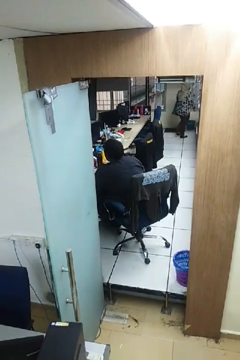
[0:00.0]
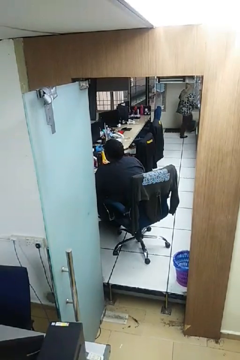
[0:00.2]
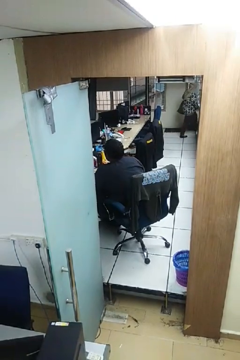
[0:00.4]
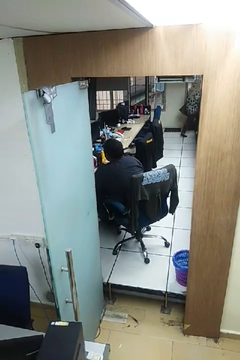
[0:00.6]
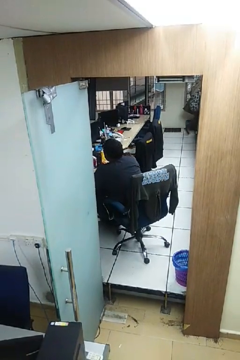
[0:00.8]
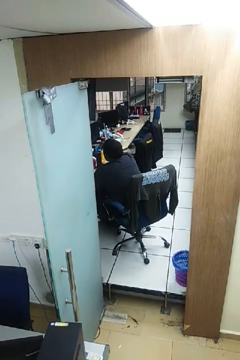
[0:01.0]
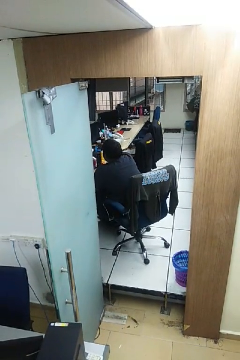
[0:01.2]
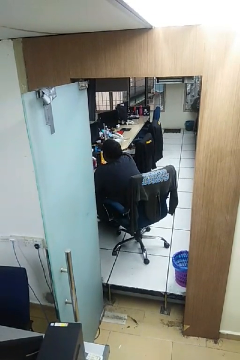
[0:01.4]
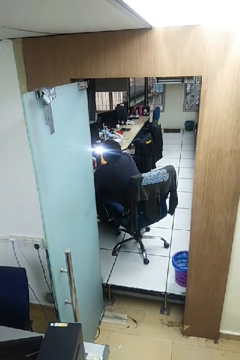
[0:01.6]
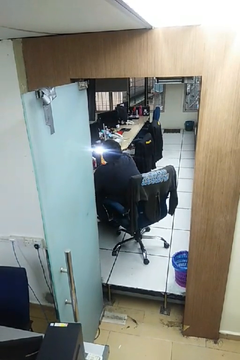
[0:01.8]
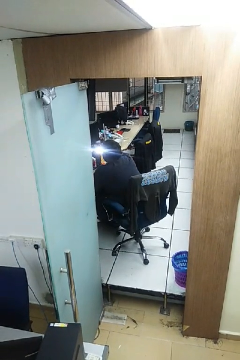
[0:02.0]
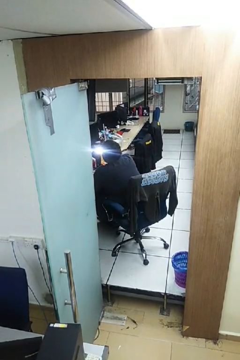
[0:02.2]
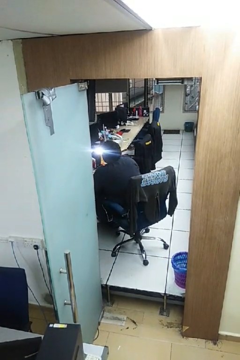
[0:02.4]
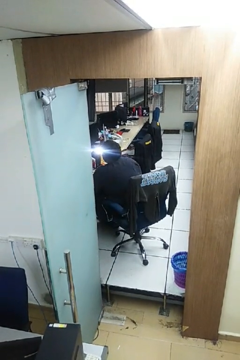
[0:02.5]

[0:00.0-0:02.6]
person turns on lamp

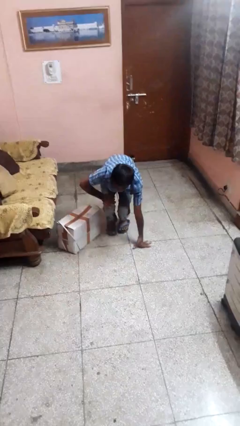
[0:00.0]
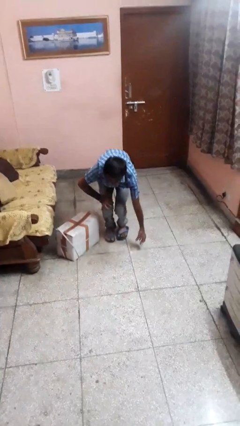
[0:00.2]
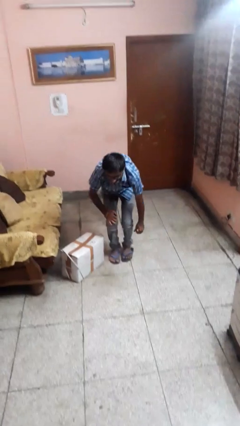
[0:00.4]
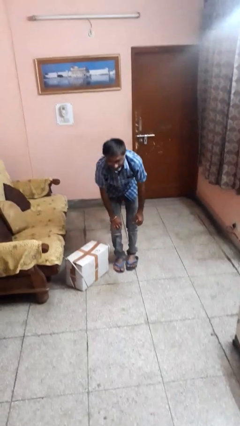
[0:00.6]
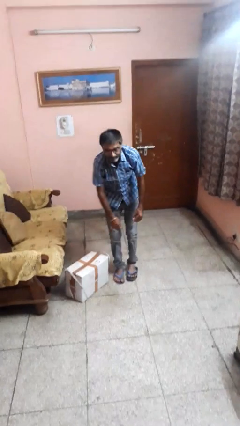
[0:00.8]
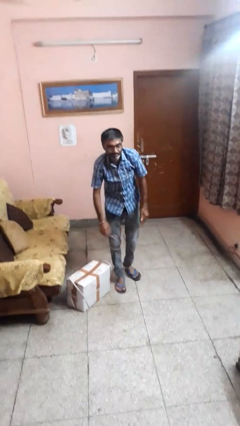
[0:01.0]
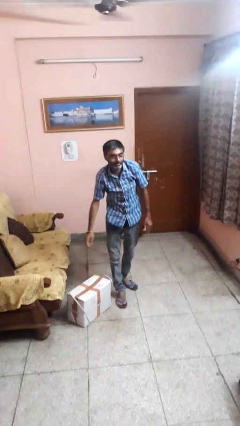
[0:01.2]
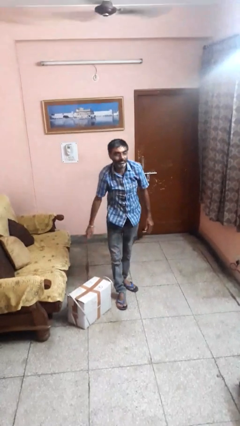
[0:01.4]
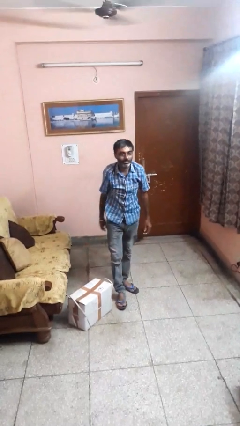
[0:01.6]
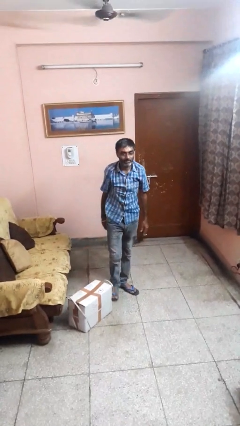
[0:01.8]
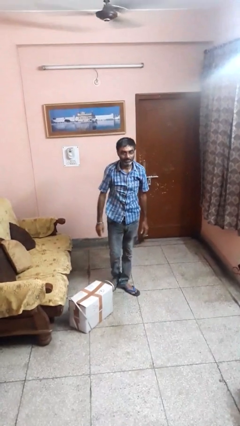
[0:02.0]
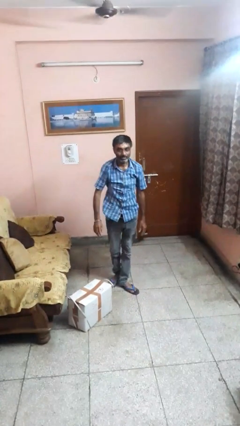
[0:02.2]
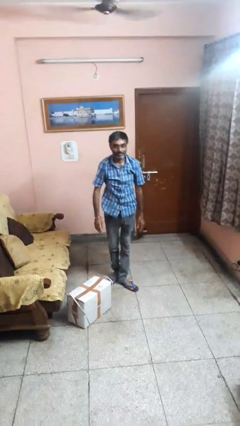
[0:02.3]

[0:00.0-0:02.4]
person stands up from floor

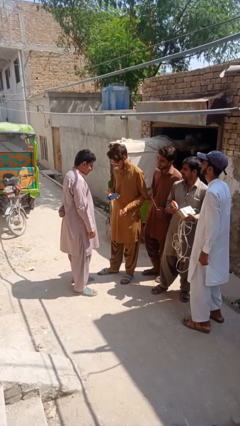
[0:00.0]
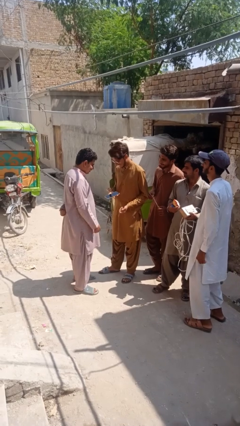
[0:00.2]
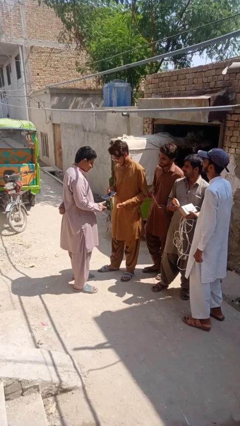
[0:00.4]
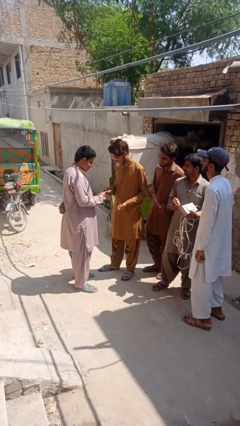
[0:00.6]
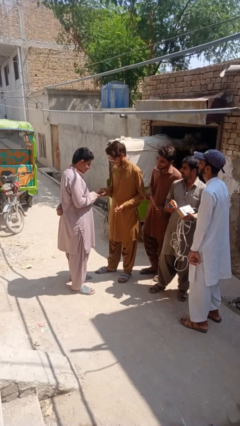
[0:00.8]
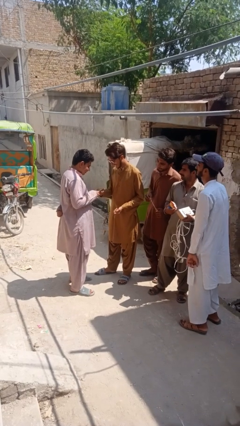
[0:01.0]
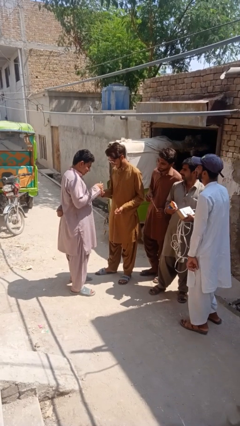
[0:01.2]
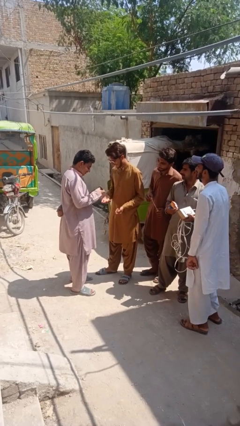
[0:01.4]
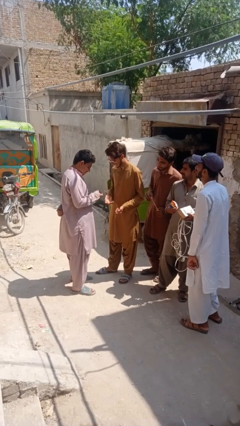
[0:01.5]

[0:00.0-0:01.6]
person transfers object to person

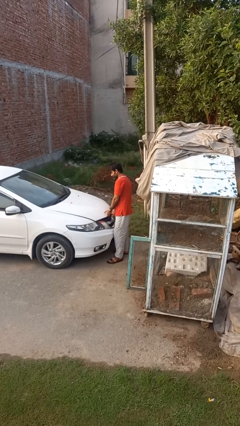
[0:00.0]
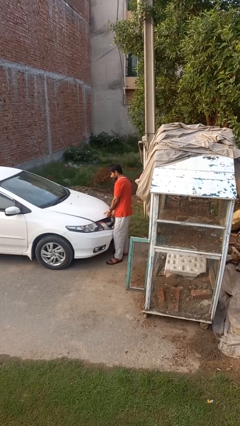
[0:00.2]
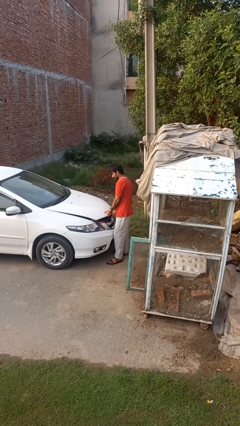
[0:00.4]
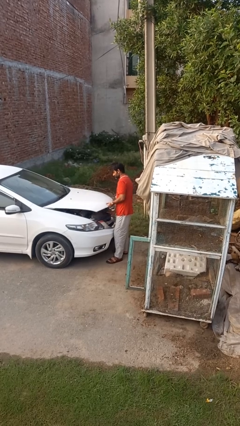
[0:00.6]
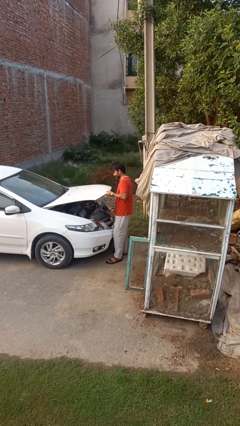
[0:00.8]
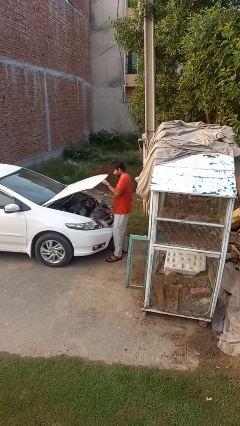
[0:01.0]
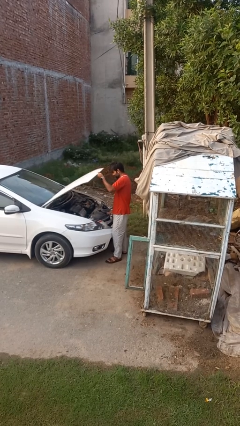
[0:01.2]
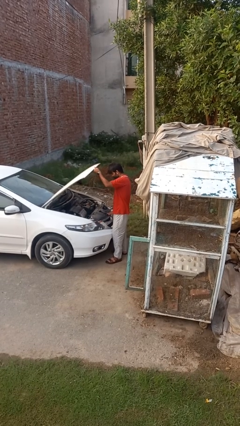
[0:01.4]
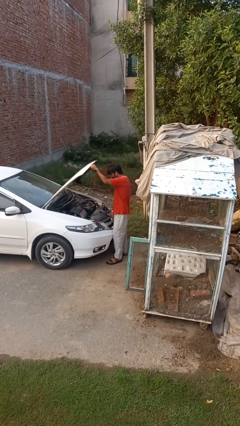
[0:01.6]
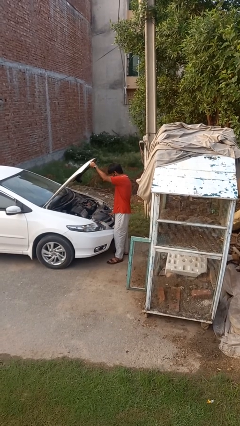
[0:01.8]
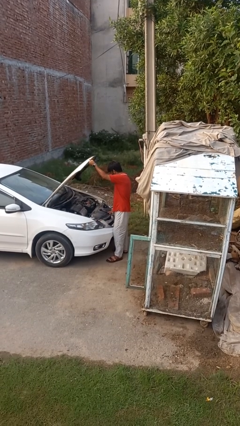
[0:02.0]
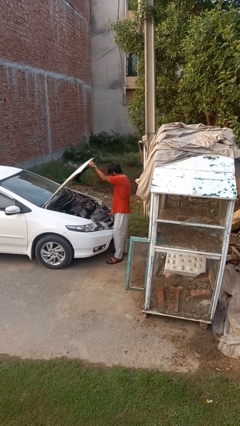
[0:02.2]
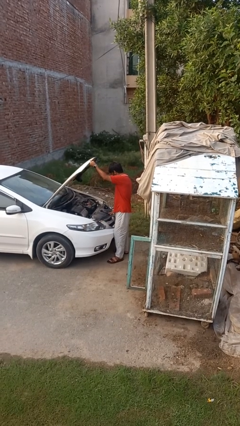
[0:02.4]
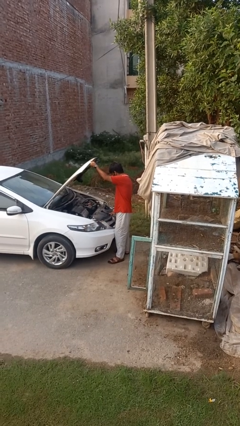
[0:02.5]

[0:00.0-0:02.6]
person opens car hood

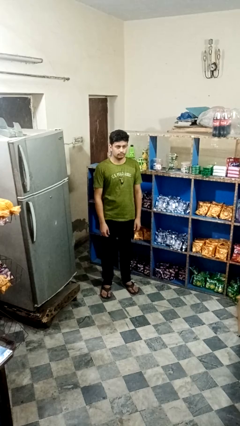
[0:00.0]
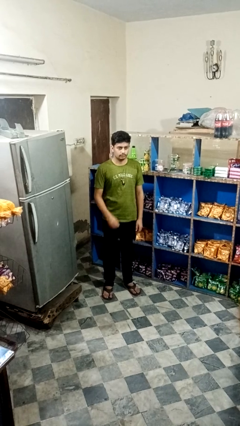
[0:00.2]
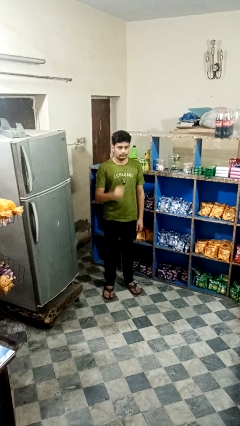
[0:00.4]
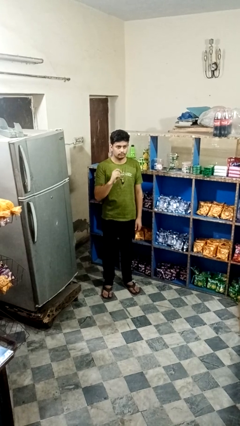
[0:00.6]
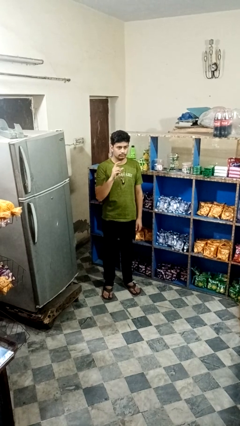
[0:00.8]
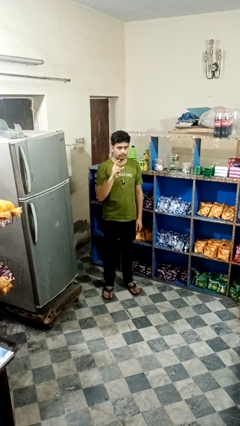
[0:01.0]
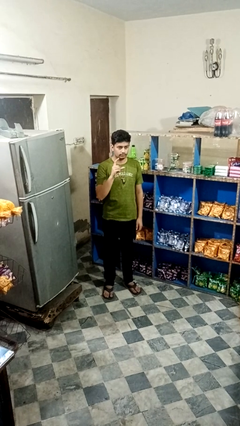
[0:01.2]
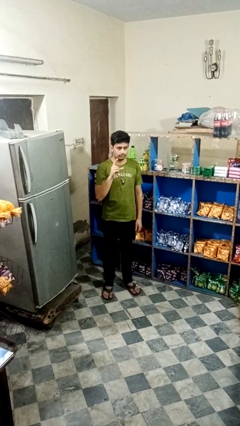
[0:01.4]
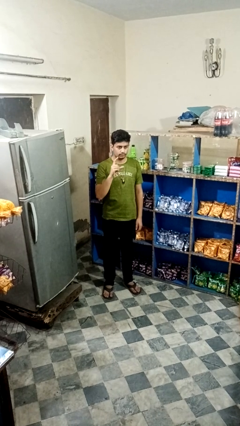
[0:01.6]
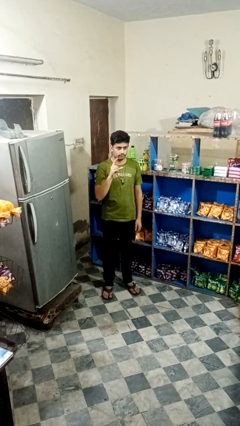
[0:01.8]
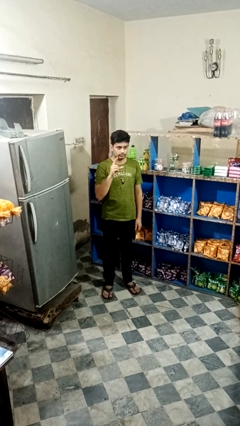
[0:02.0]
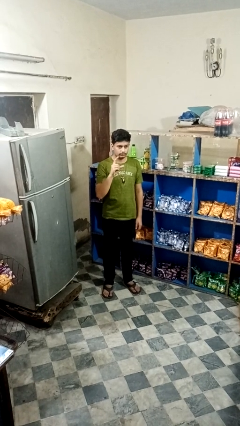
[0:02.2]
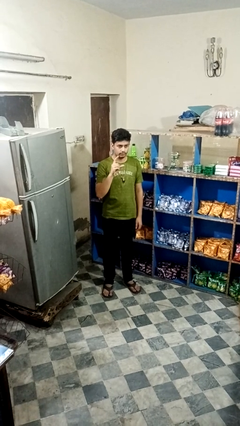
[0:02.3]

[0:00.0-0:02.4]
person gestures zoom in

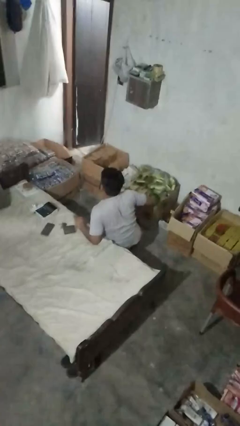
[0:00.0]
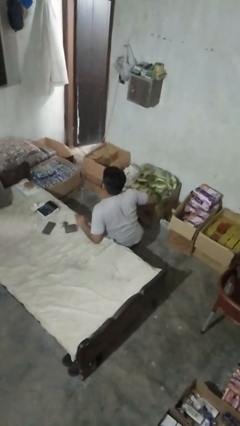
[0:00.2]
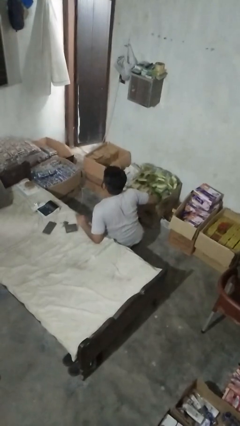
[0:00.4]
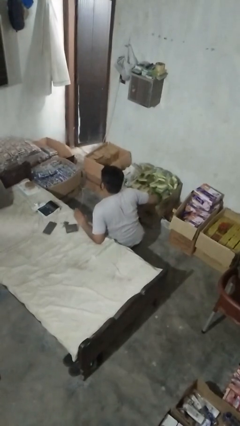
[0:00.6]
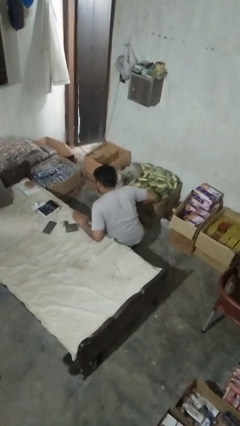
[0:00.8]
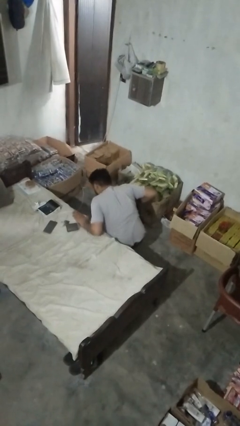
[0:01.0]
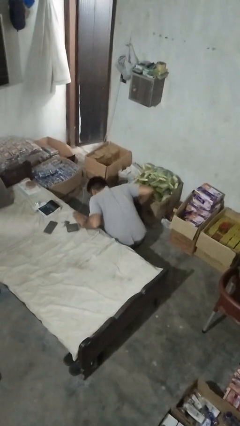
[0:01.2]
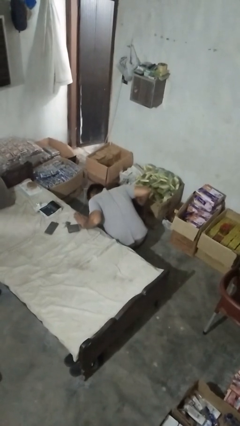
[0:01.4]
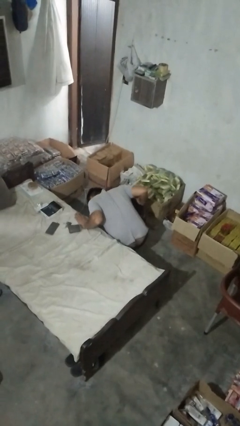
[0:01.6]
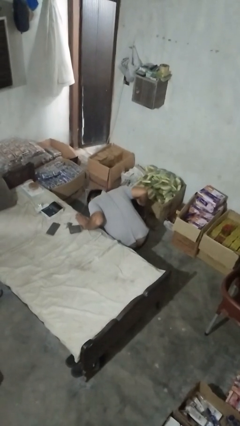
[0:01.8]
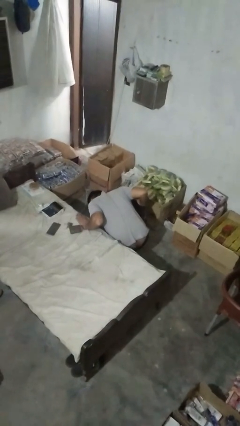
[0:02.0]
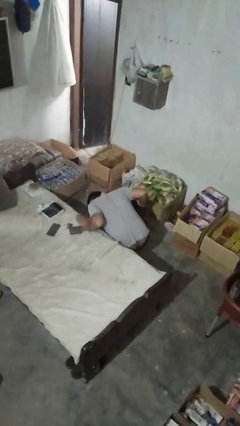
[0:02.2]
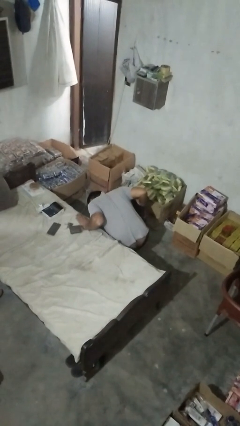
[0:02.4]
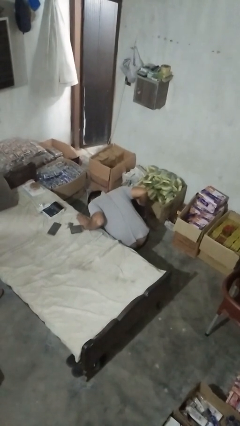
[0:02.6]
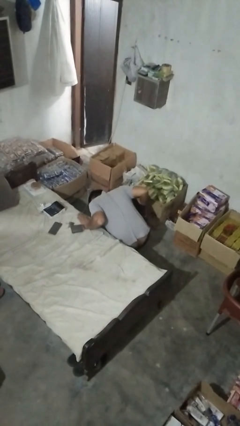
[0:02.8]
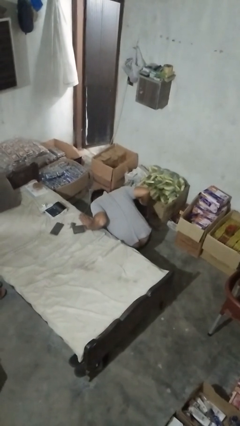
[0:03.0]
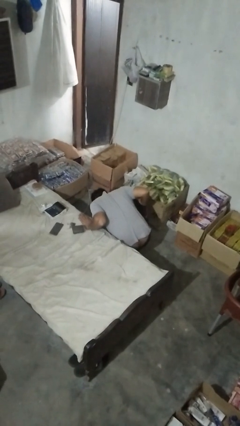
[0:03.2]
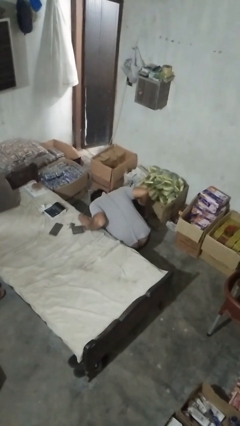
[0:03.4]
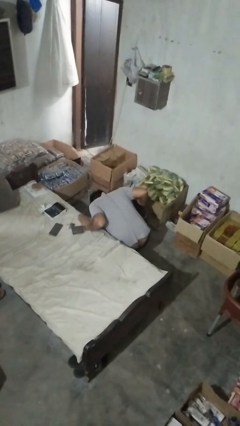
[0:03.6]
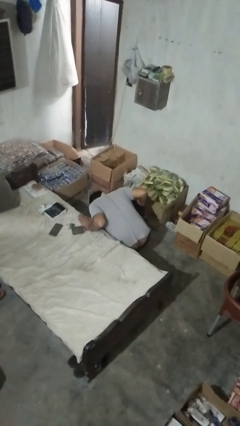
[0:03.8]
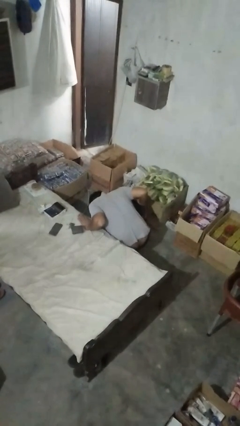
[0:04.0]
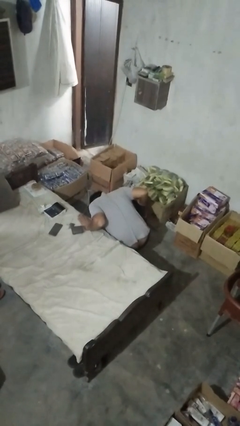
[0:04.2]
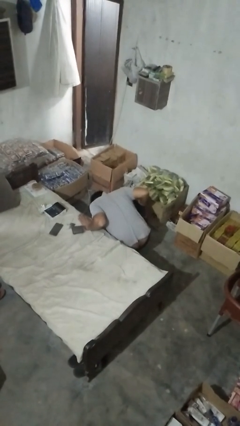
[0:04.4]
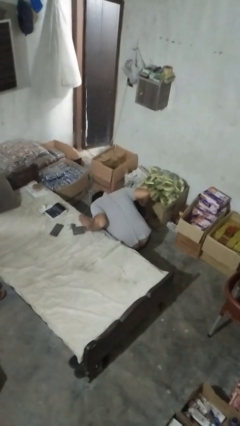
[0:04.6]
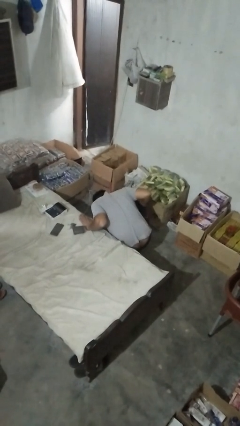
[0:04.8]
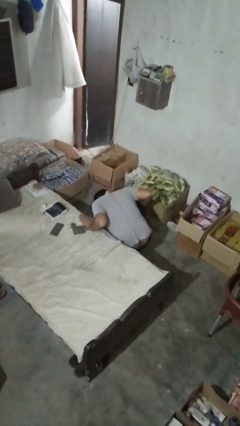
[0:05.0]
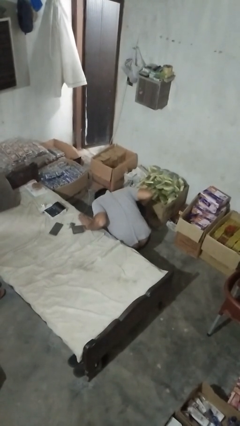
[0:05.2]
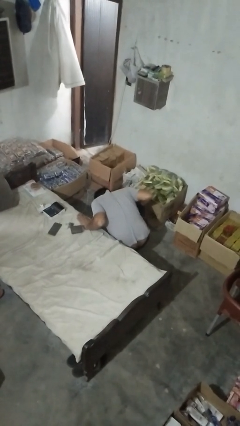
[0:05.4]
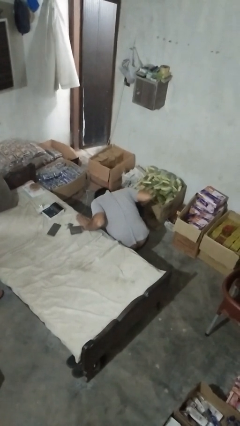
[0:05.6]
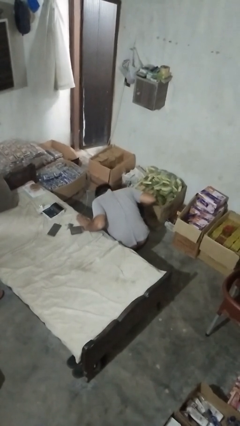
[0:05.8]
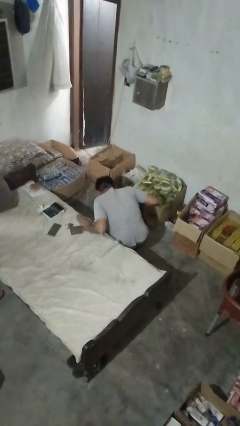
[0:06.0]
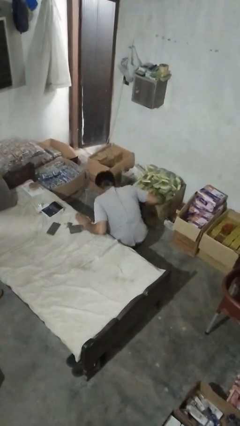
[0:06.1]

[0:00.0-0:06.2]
person searches under couch

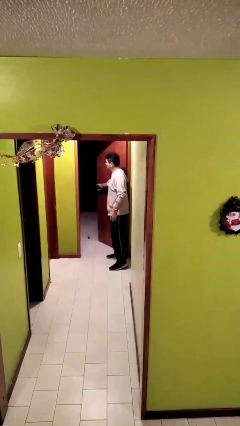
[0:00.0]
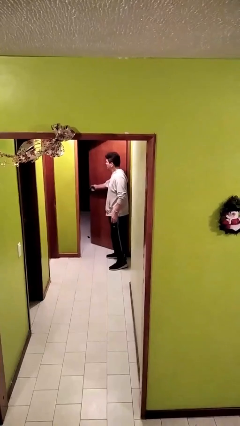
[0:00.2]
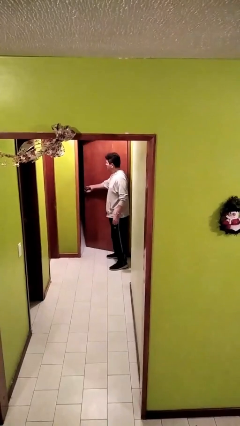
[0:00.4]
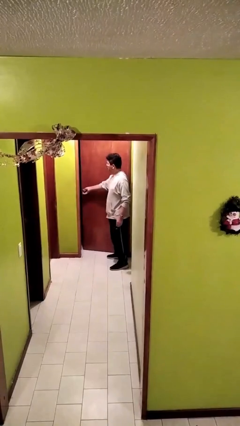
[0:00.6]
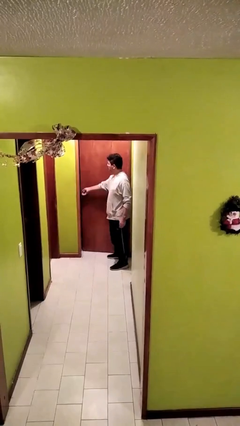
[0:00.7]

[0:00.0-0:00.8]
person closes facility door
